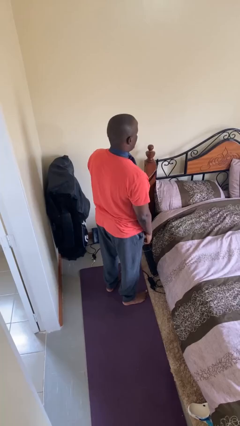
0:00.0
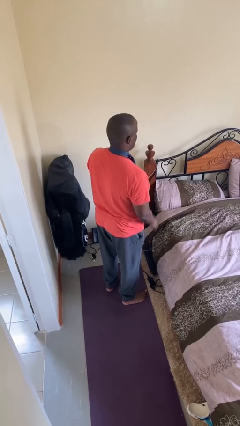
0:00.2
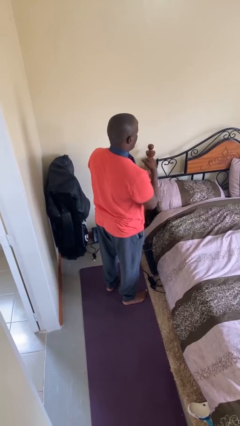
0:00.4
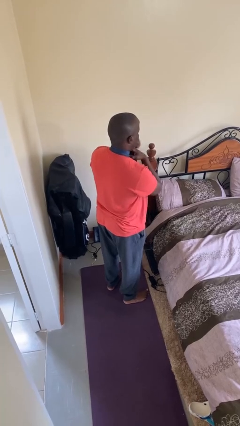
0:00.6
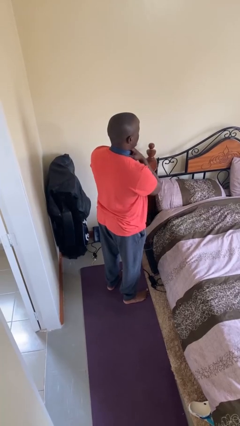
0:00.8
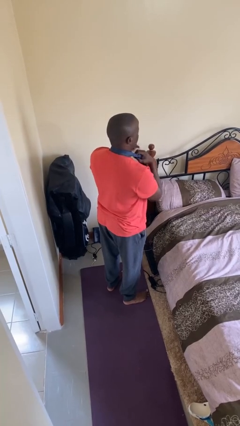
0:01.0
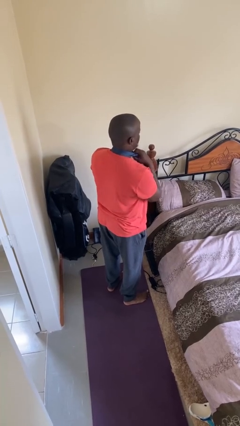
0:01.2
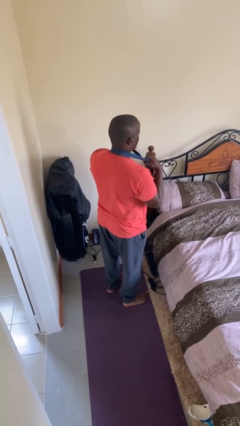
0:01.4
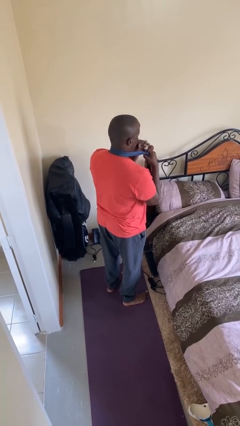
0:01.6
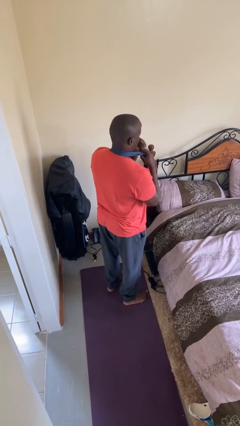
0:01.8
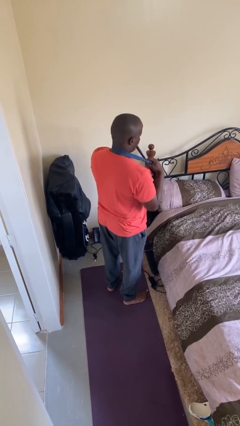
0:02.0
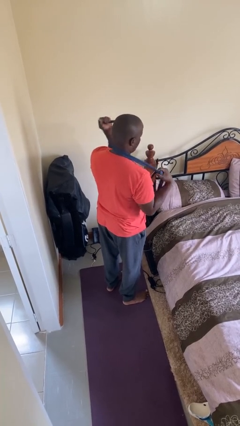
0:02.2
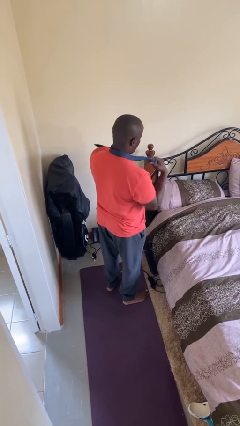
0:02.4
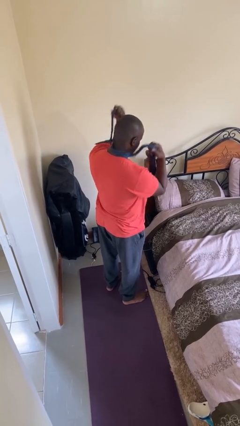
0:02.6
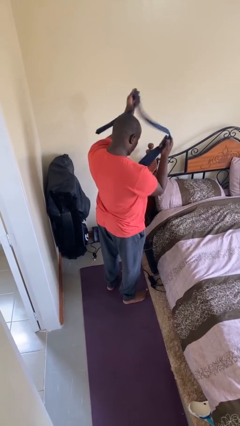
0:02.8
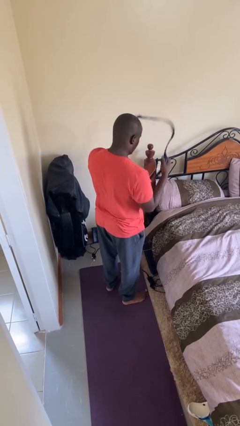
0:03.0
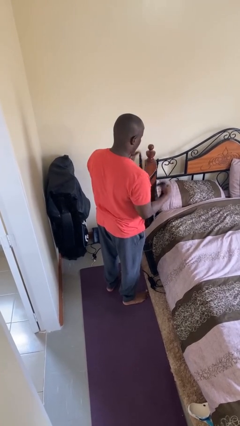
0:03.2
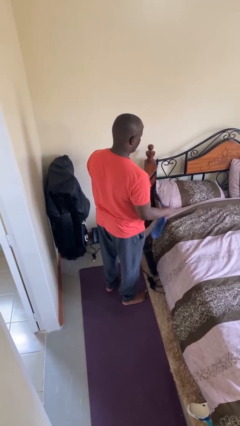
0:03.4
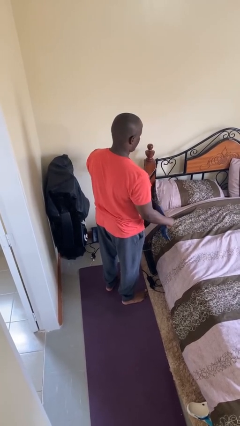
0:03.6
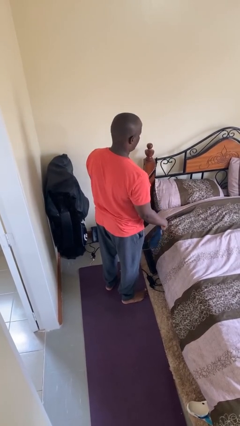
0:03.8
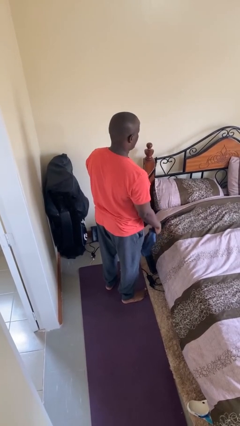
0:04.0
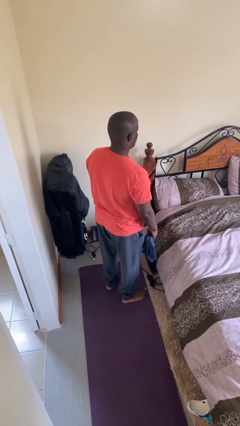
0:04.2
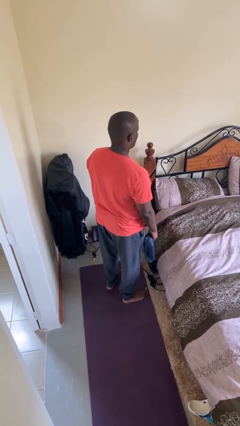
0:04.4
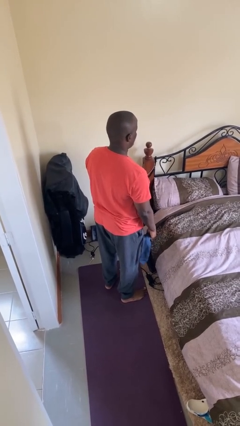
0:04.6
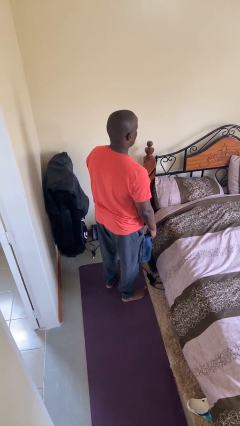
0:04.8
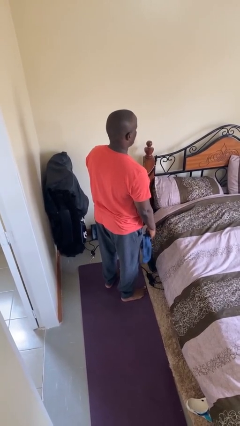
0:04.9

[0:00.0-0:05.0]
person takes off necktie

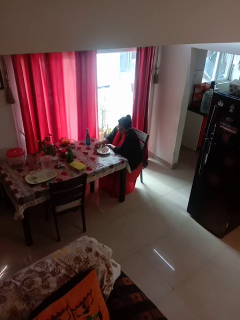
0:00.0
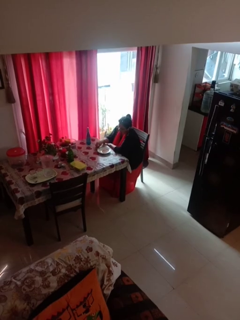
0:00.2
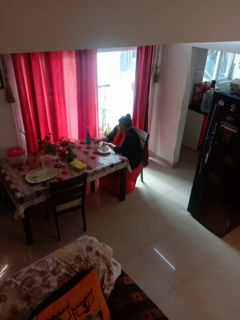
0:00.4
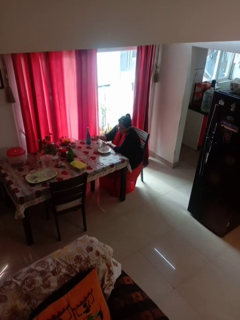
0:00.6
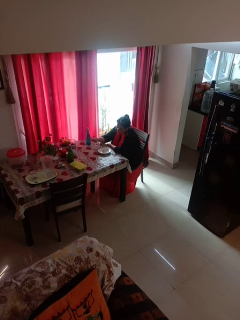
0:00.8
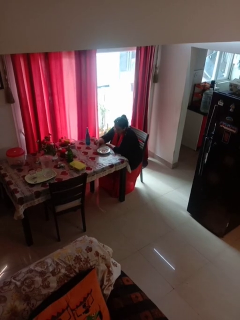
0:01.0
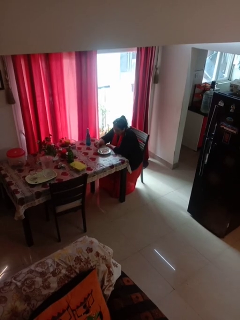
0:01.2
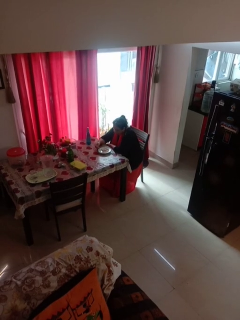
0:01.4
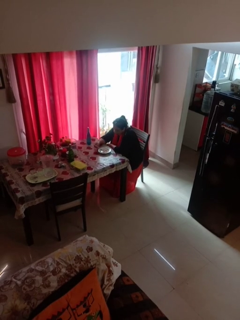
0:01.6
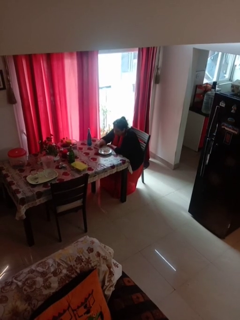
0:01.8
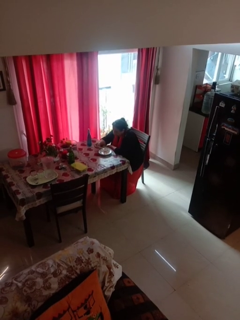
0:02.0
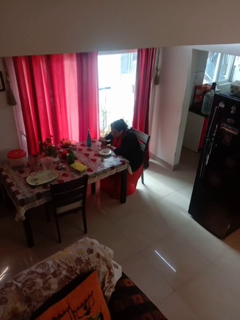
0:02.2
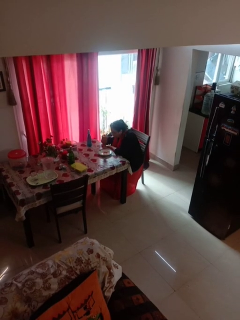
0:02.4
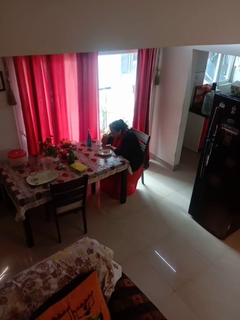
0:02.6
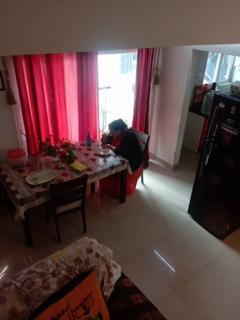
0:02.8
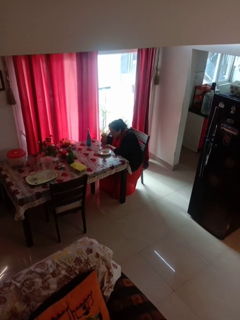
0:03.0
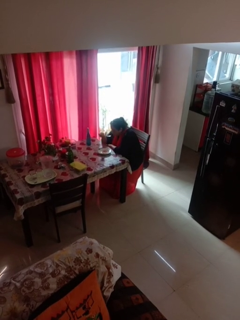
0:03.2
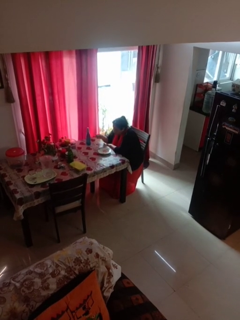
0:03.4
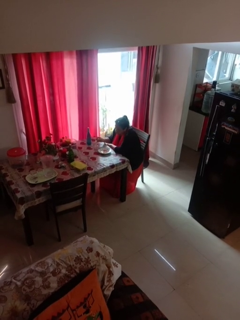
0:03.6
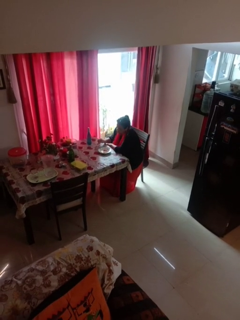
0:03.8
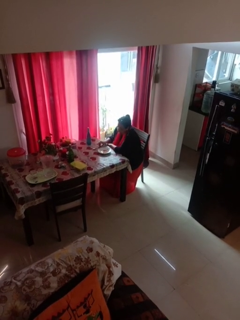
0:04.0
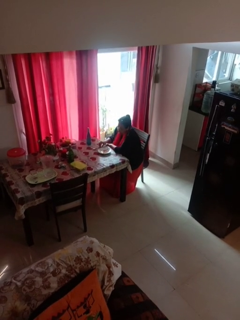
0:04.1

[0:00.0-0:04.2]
person eats with utensil

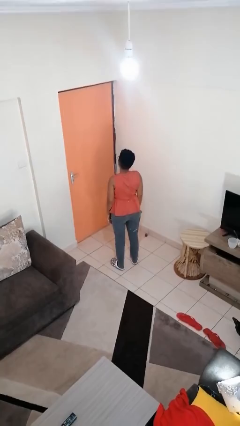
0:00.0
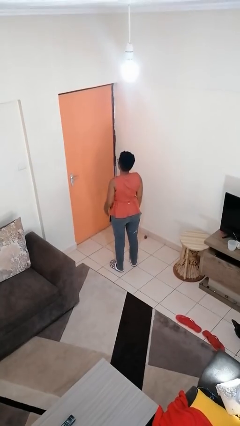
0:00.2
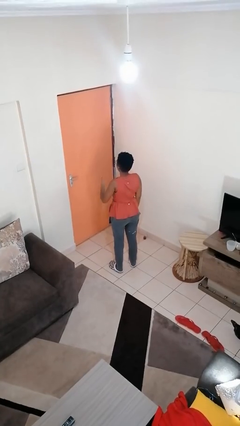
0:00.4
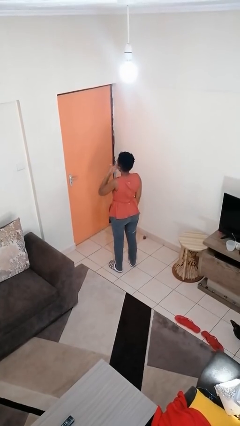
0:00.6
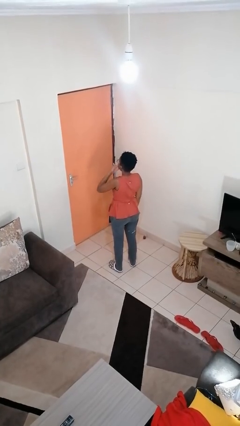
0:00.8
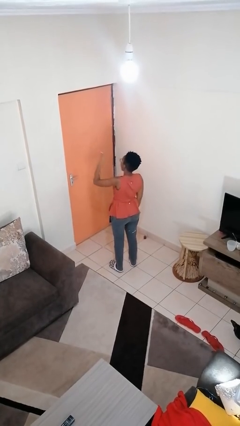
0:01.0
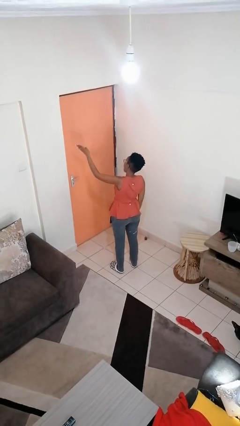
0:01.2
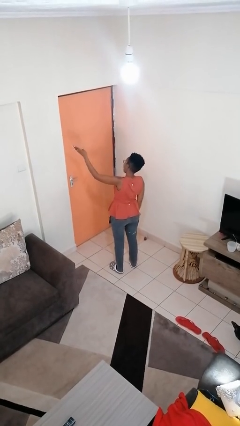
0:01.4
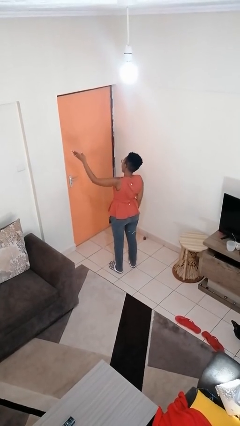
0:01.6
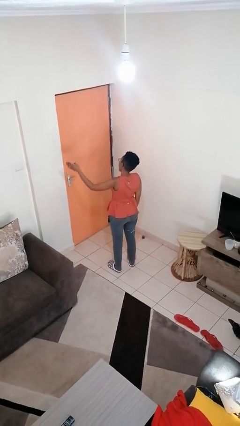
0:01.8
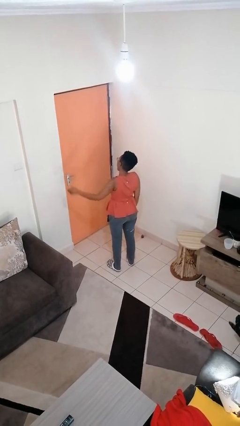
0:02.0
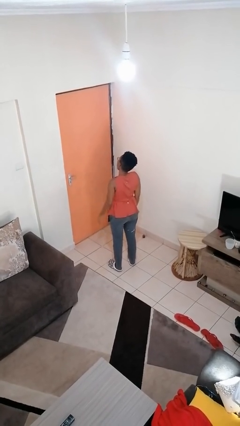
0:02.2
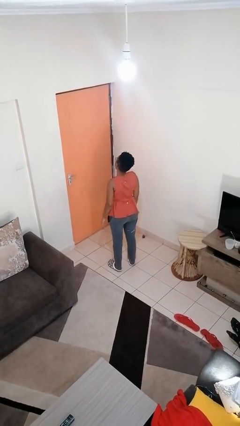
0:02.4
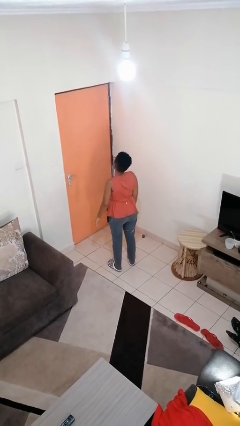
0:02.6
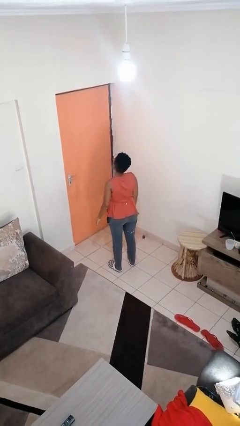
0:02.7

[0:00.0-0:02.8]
person gestures blow kiss

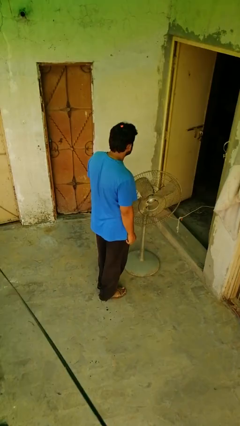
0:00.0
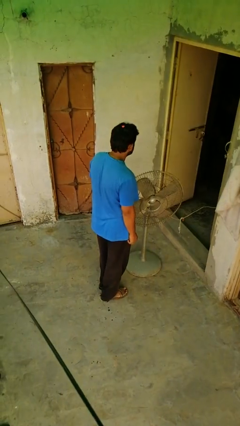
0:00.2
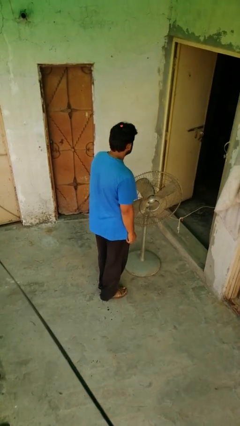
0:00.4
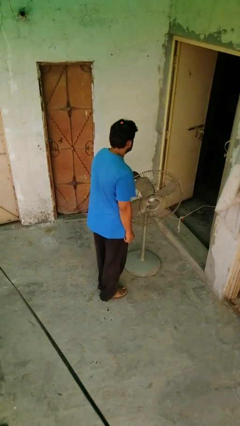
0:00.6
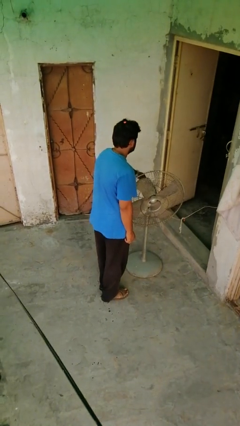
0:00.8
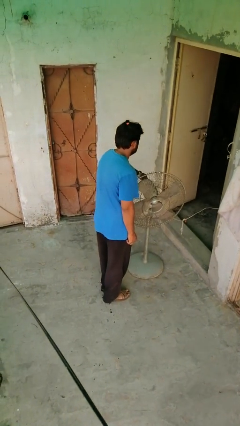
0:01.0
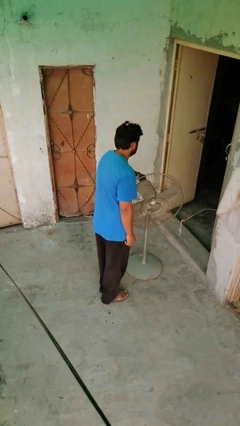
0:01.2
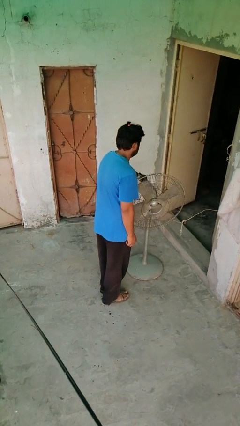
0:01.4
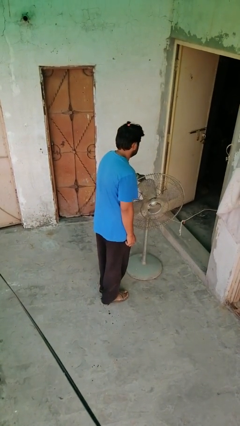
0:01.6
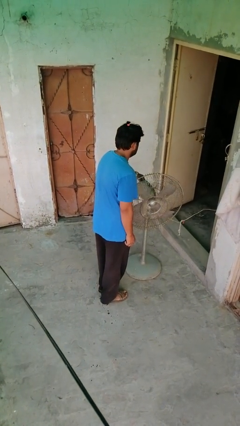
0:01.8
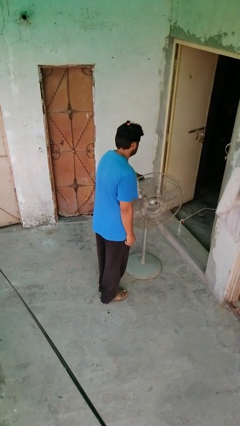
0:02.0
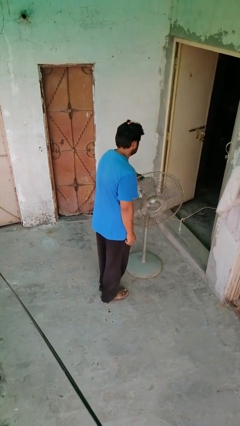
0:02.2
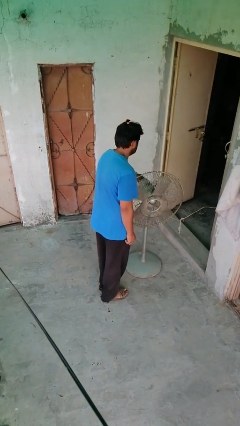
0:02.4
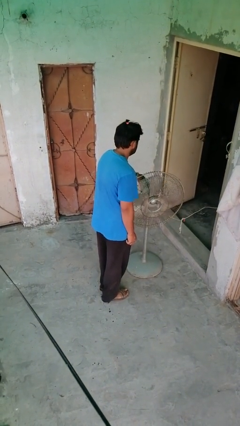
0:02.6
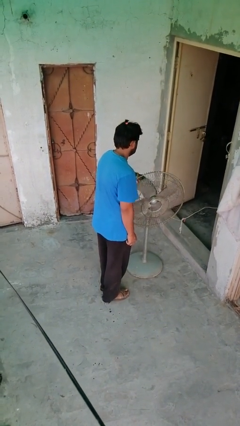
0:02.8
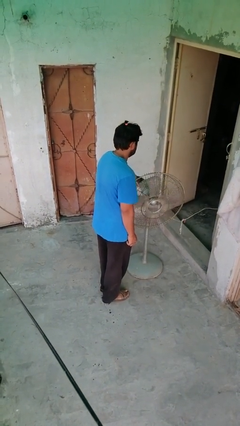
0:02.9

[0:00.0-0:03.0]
person turns on fan

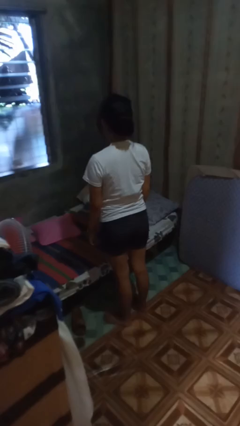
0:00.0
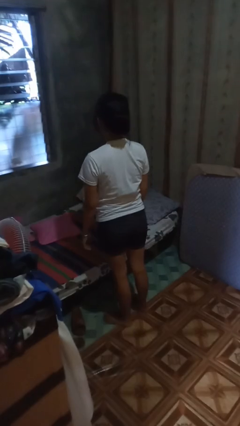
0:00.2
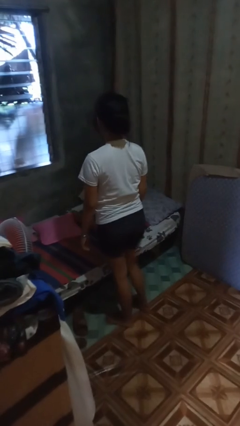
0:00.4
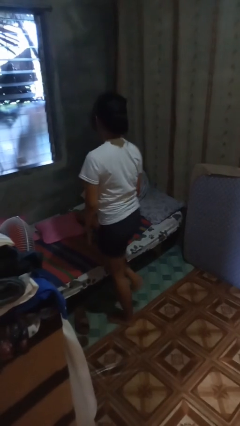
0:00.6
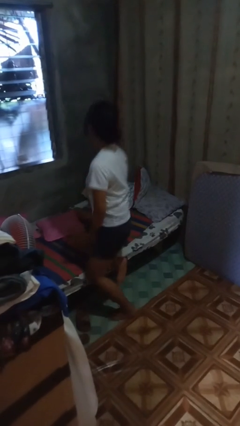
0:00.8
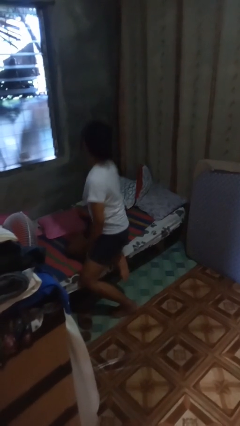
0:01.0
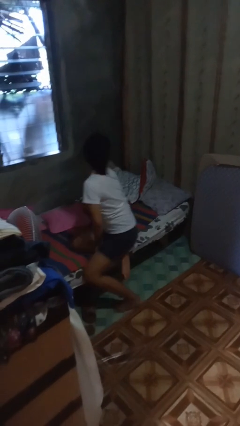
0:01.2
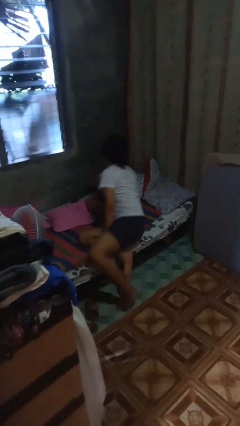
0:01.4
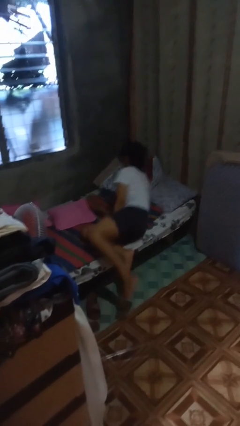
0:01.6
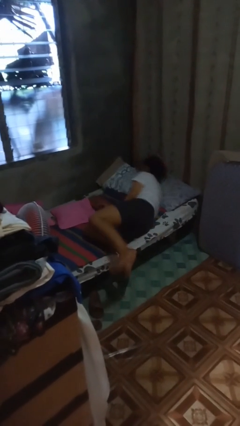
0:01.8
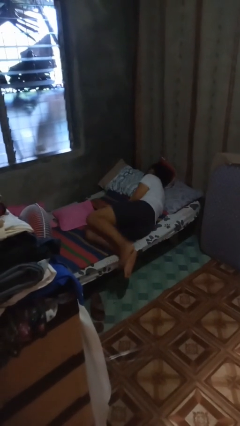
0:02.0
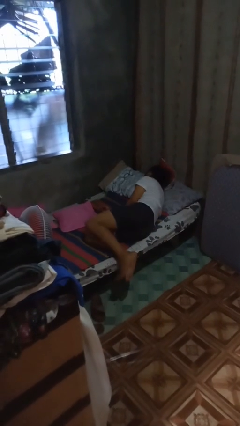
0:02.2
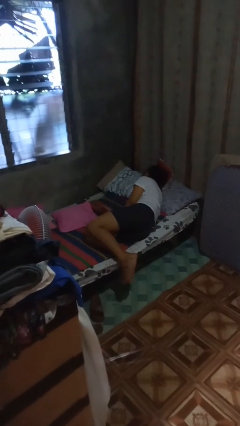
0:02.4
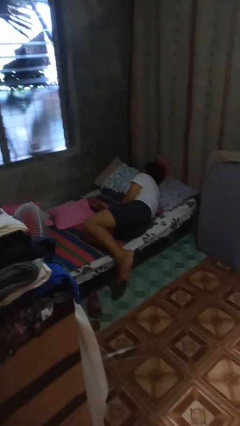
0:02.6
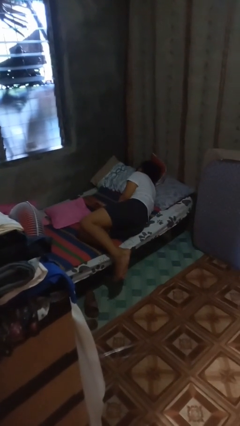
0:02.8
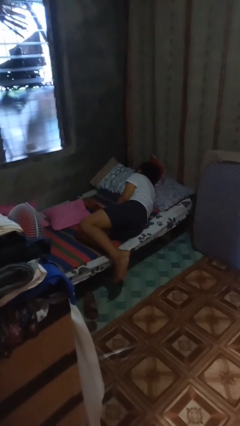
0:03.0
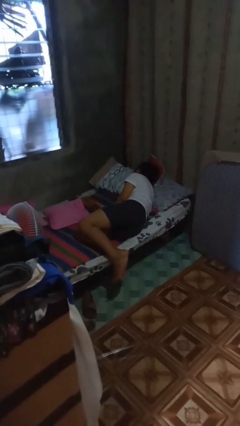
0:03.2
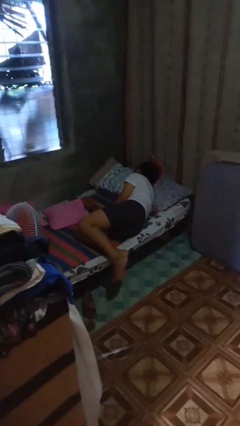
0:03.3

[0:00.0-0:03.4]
person lies down on bed
